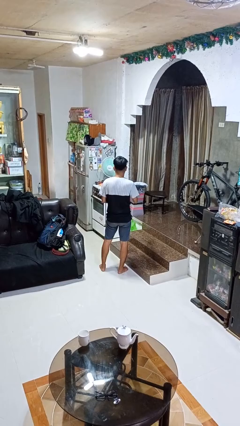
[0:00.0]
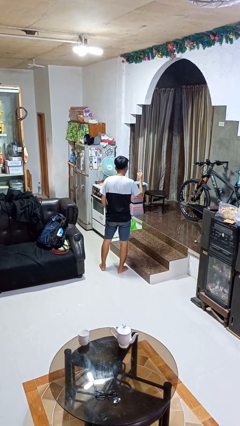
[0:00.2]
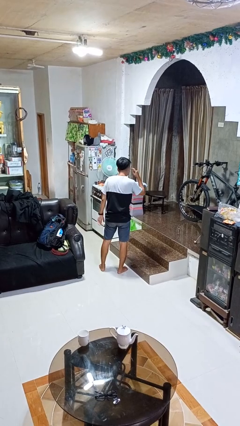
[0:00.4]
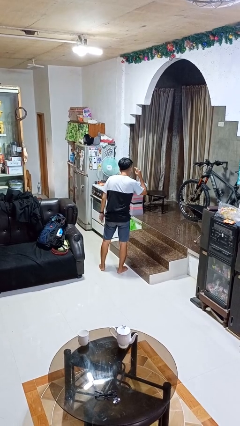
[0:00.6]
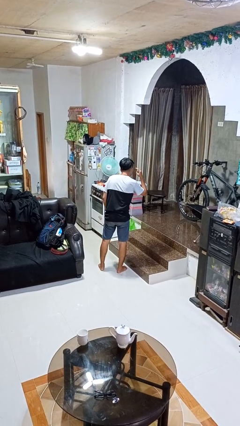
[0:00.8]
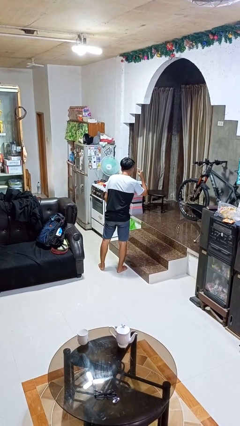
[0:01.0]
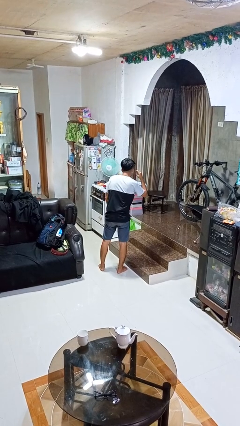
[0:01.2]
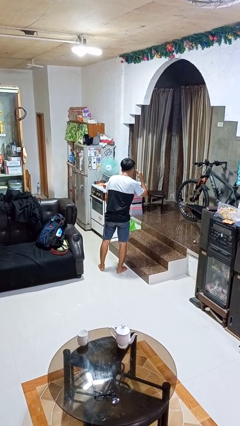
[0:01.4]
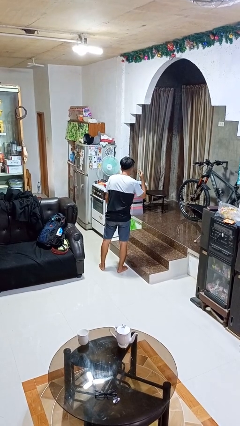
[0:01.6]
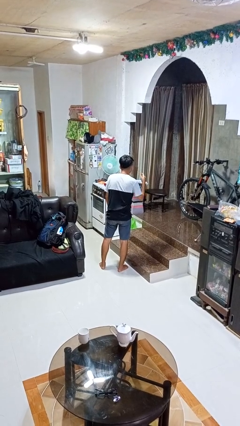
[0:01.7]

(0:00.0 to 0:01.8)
person gestures listen closely

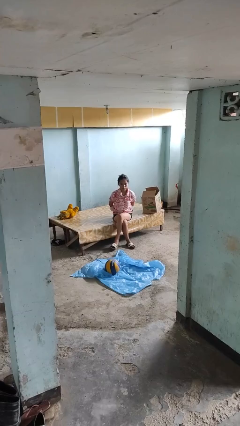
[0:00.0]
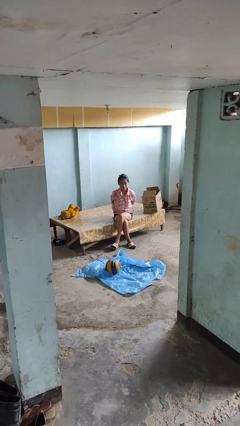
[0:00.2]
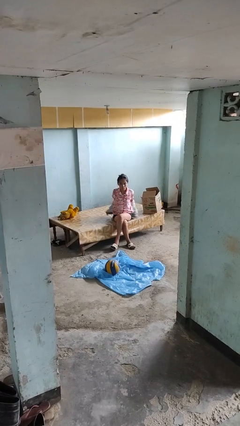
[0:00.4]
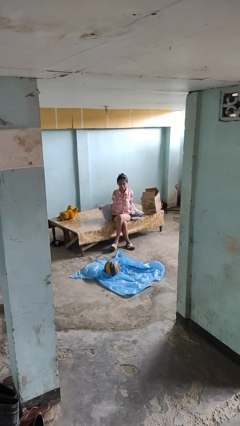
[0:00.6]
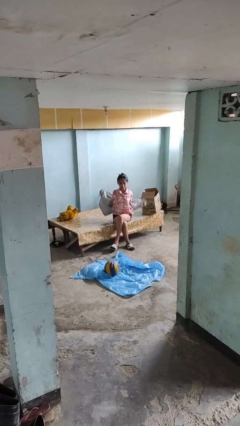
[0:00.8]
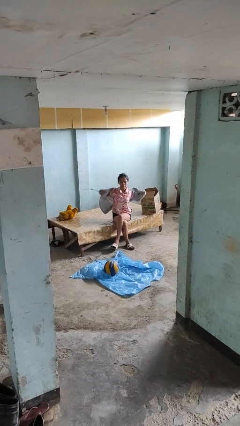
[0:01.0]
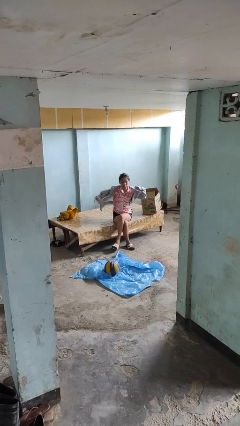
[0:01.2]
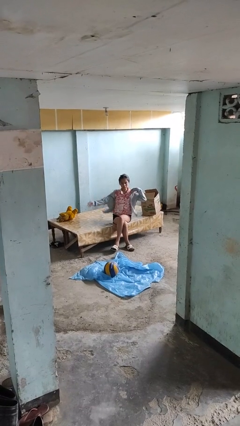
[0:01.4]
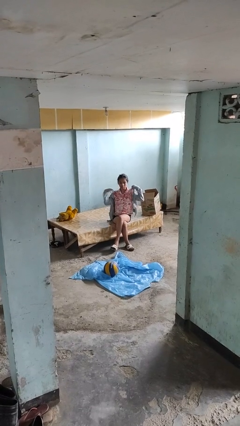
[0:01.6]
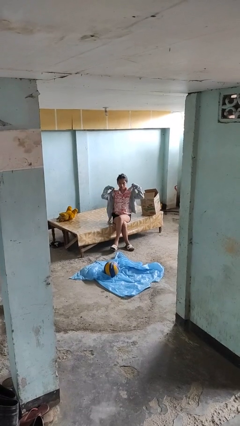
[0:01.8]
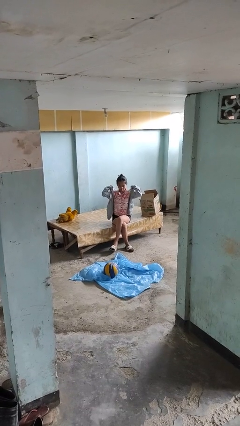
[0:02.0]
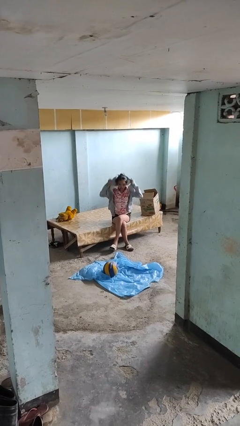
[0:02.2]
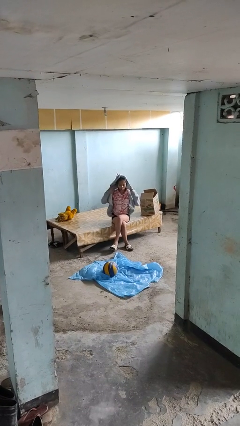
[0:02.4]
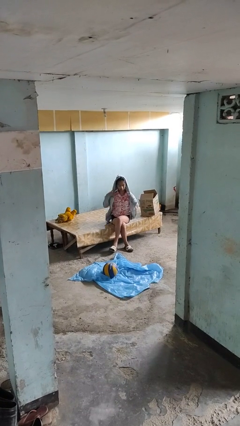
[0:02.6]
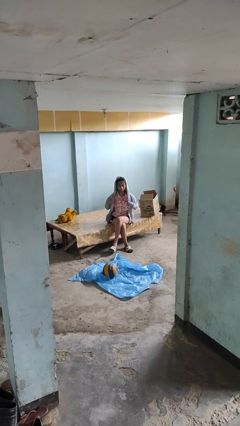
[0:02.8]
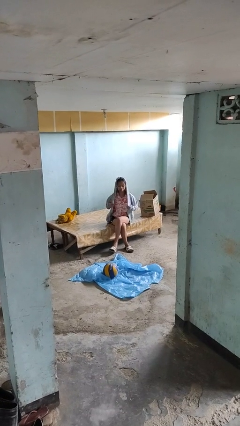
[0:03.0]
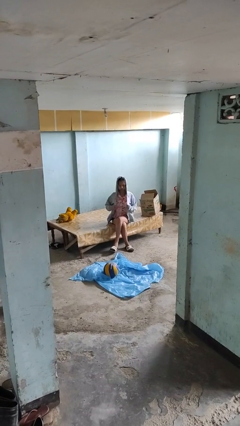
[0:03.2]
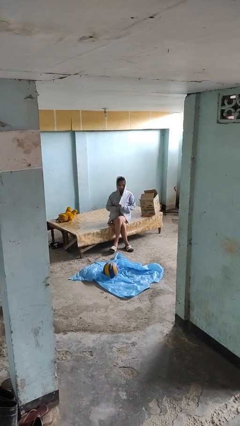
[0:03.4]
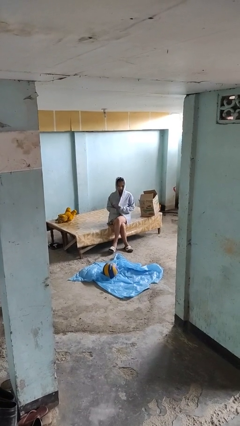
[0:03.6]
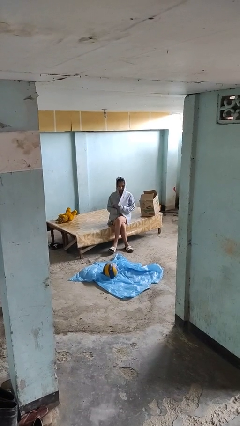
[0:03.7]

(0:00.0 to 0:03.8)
person puts on hoodie

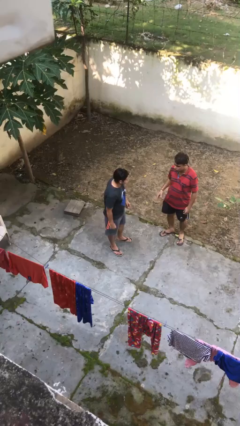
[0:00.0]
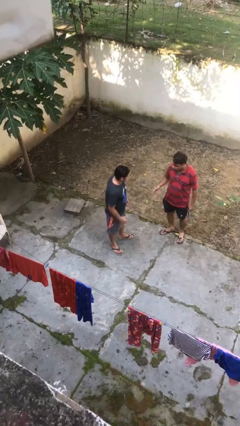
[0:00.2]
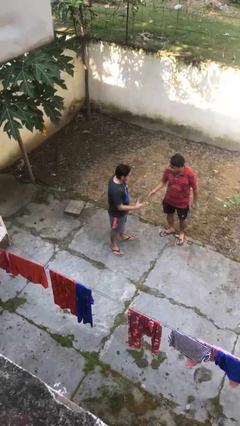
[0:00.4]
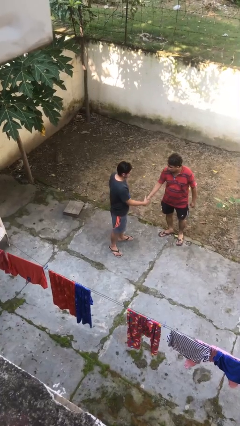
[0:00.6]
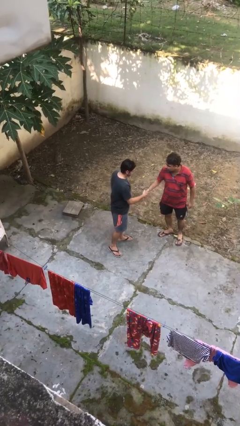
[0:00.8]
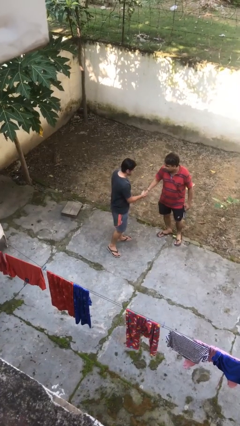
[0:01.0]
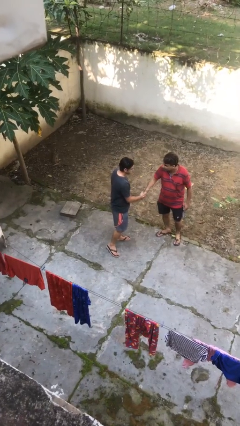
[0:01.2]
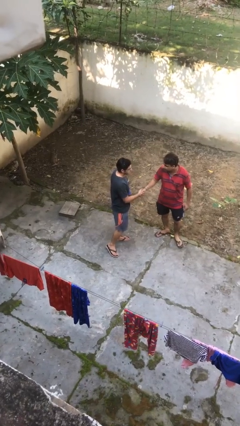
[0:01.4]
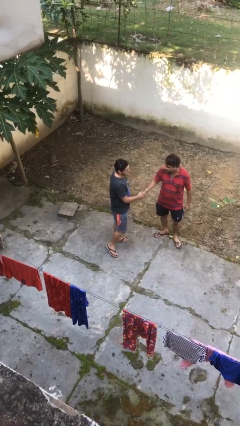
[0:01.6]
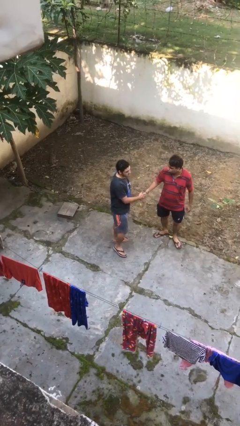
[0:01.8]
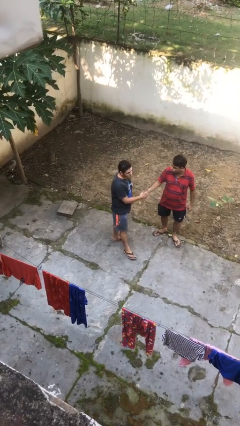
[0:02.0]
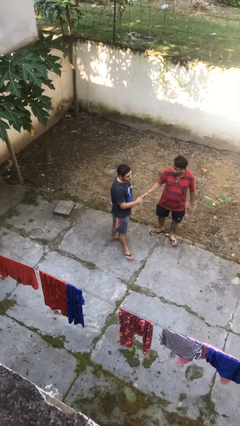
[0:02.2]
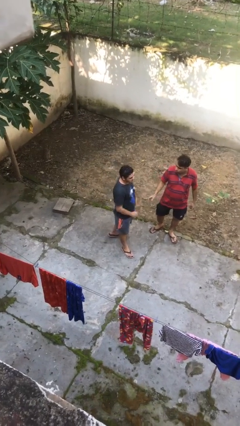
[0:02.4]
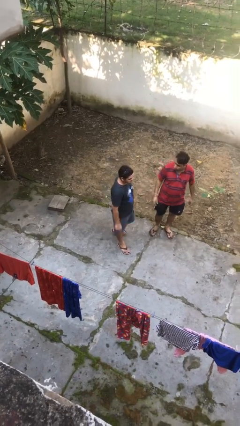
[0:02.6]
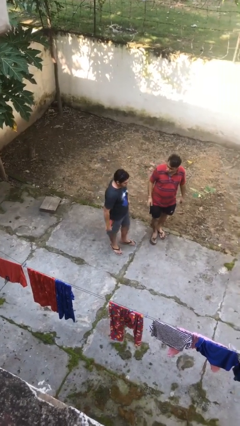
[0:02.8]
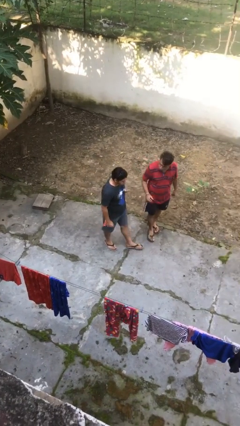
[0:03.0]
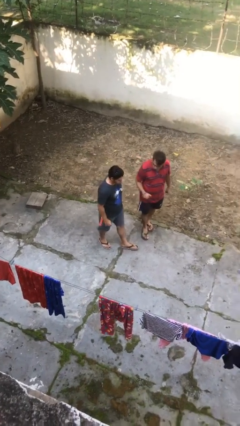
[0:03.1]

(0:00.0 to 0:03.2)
person shakes hand

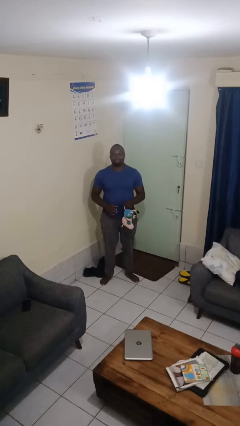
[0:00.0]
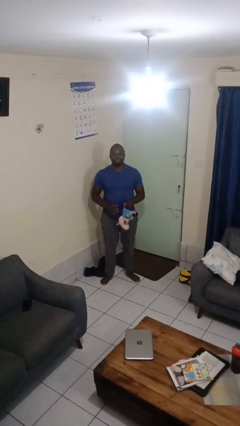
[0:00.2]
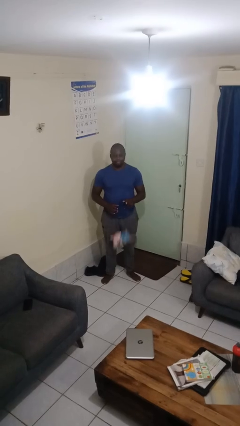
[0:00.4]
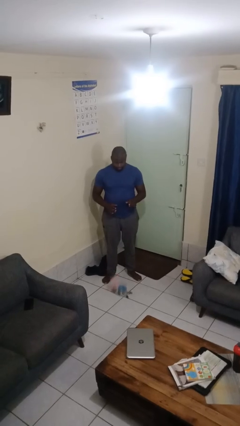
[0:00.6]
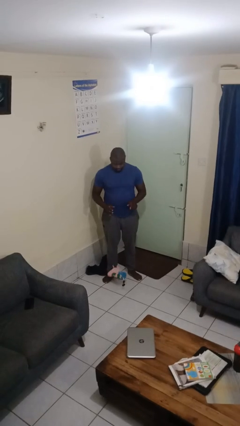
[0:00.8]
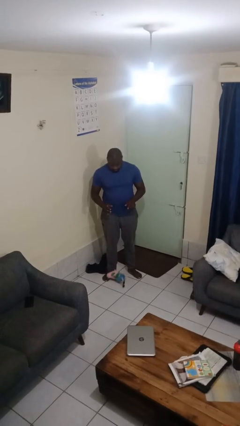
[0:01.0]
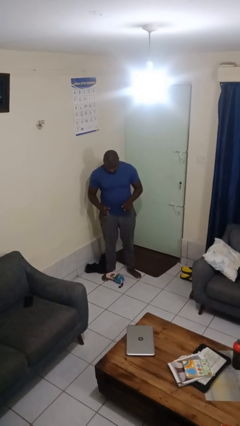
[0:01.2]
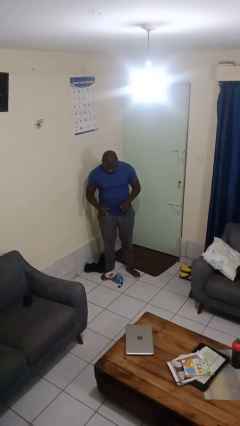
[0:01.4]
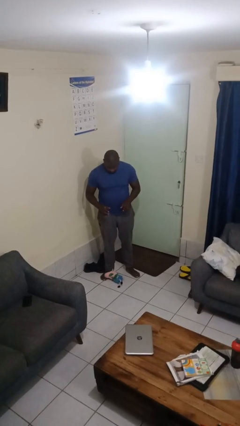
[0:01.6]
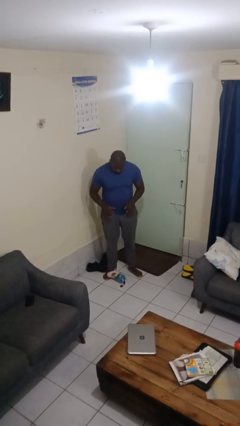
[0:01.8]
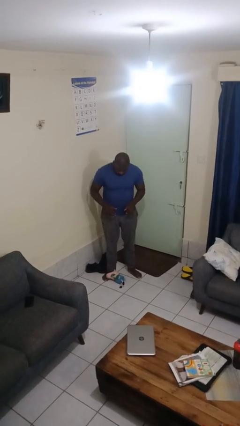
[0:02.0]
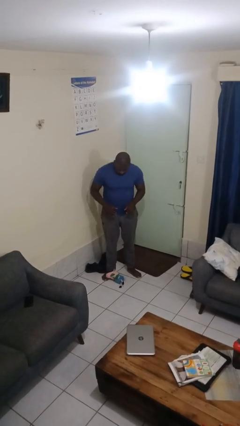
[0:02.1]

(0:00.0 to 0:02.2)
person drops object

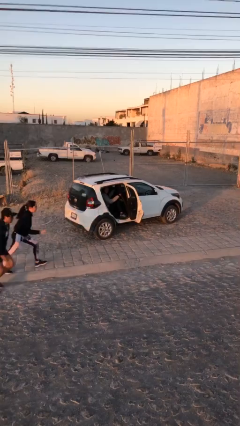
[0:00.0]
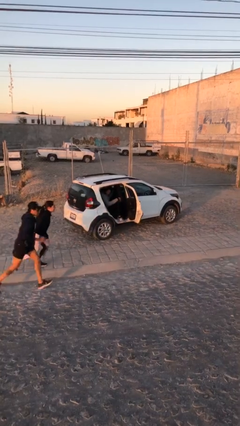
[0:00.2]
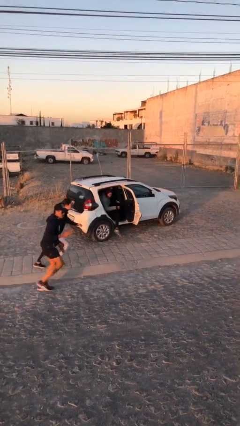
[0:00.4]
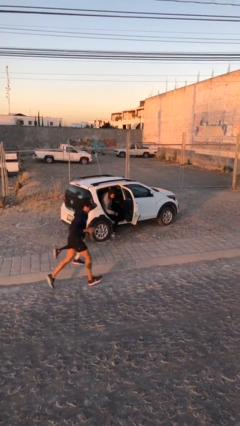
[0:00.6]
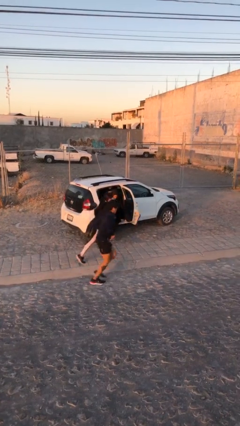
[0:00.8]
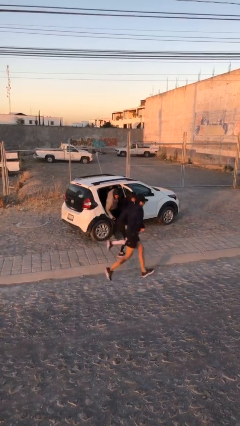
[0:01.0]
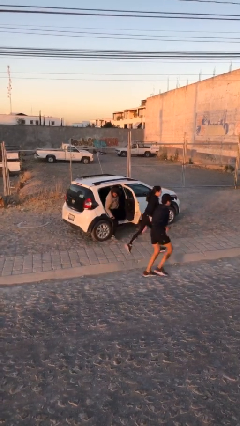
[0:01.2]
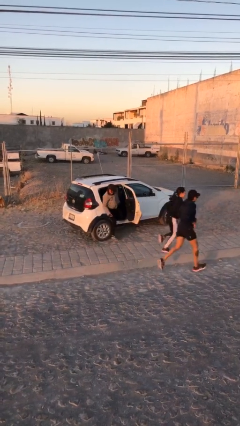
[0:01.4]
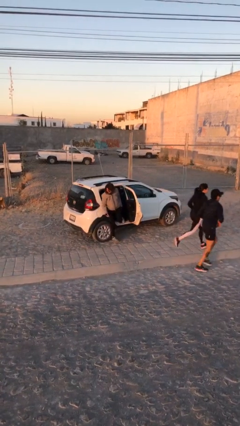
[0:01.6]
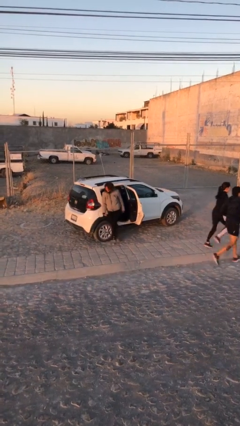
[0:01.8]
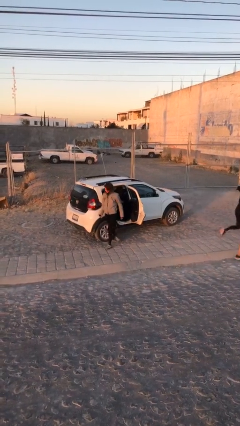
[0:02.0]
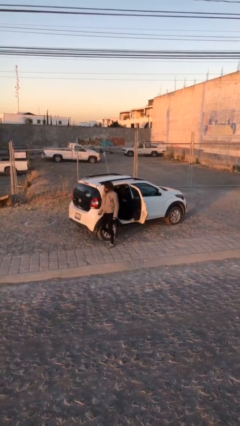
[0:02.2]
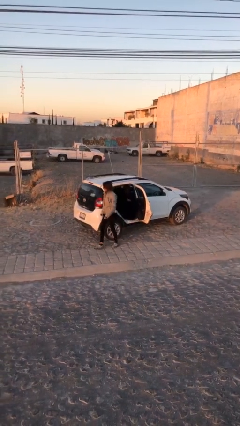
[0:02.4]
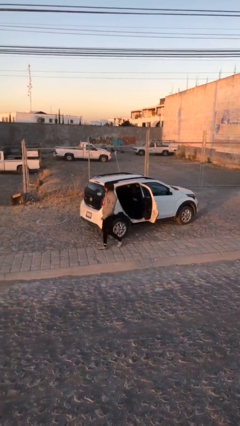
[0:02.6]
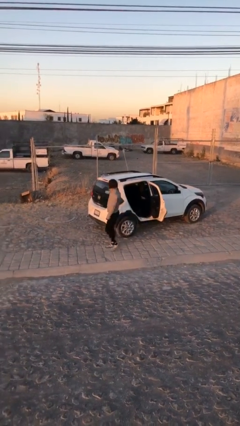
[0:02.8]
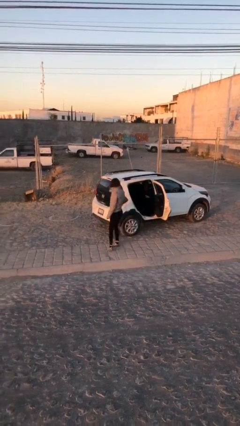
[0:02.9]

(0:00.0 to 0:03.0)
person exits car

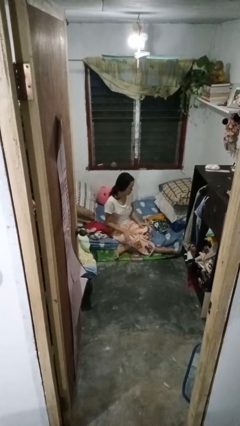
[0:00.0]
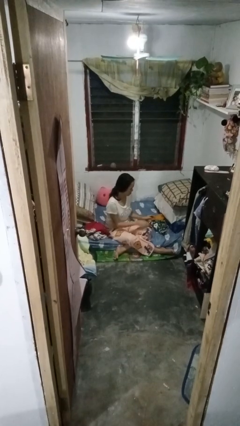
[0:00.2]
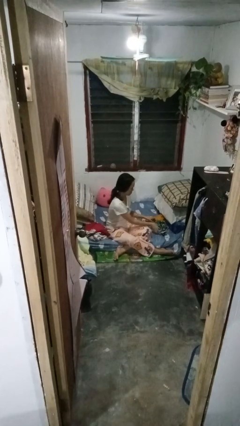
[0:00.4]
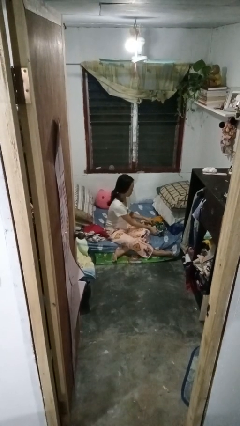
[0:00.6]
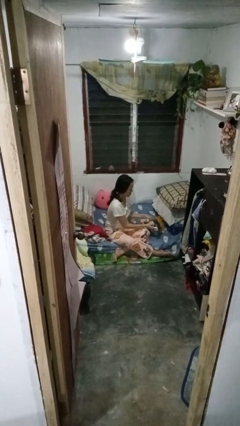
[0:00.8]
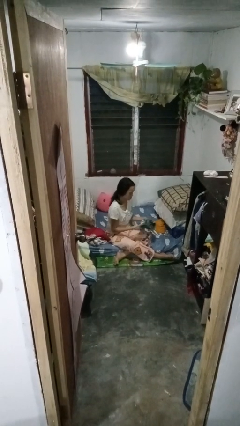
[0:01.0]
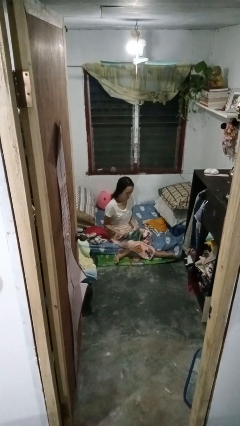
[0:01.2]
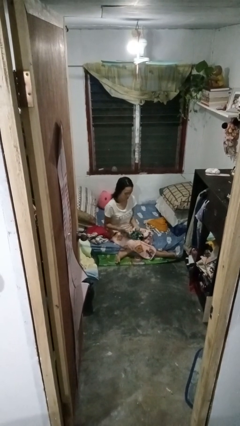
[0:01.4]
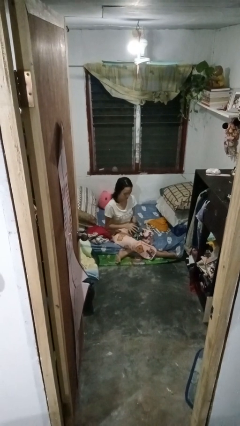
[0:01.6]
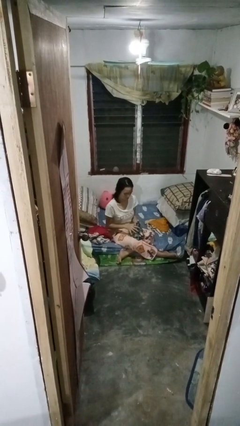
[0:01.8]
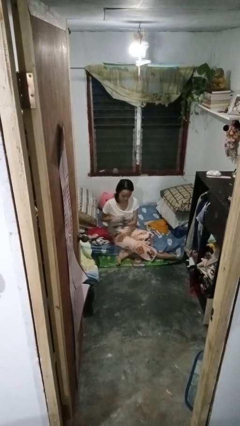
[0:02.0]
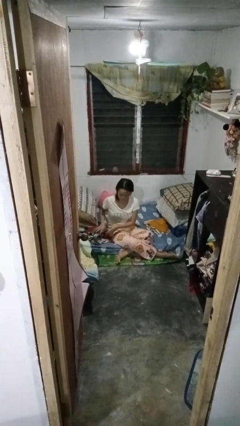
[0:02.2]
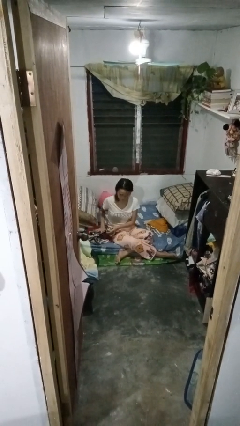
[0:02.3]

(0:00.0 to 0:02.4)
person folds shirt

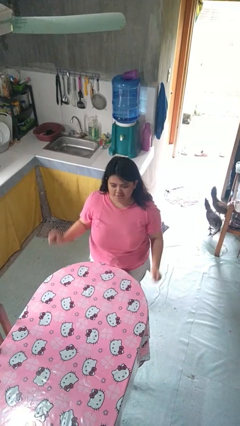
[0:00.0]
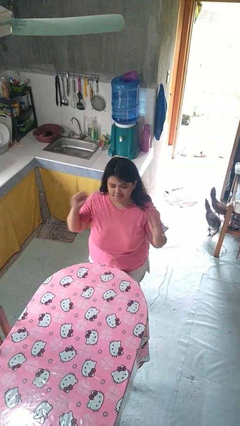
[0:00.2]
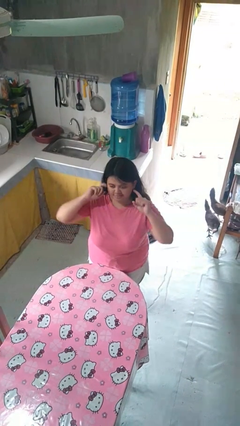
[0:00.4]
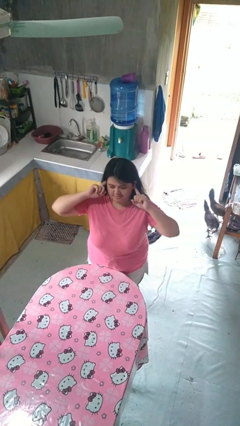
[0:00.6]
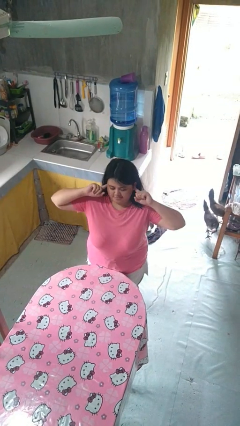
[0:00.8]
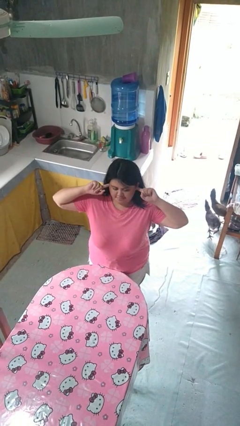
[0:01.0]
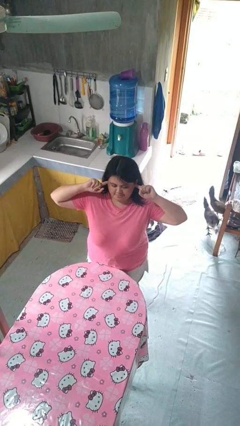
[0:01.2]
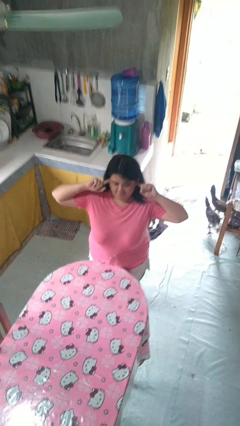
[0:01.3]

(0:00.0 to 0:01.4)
person puts fingers in ear
